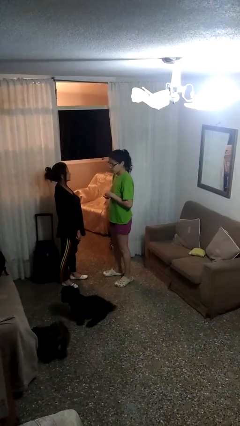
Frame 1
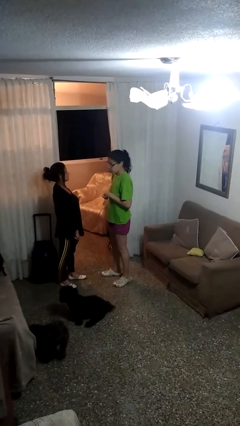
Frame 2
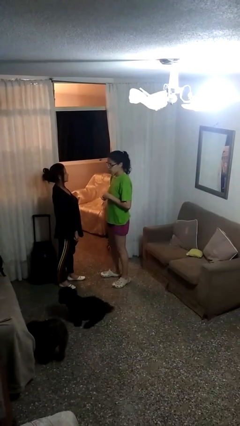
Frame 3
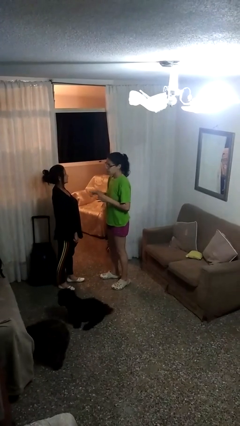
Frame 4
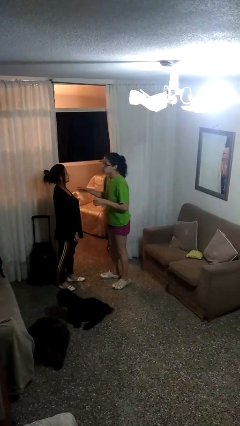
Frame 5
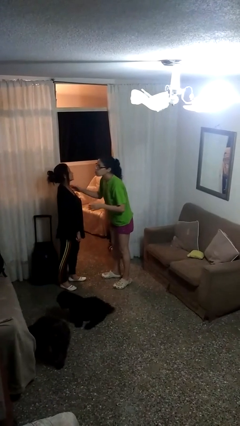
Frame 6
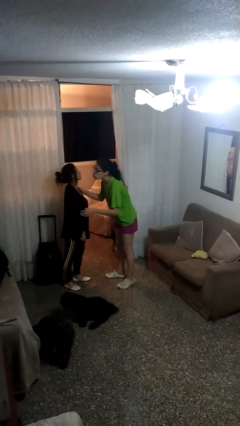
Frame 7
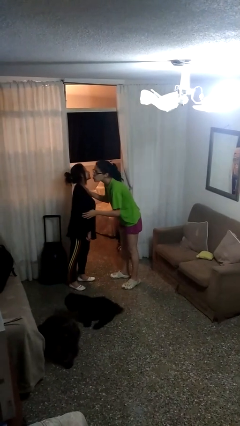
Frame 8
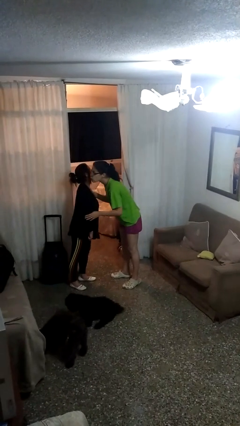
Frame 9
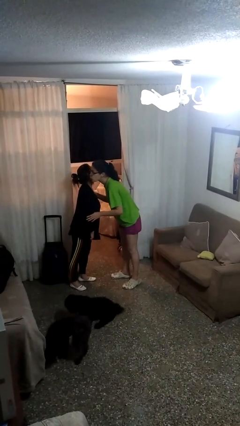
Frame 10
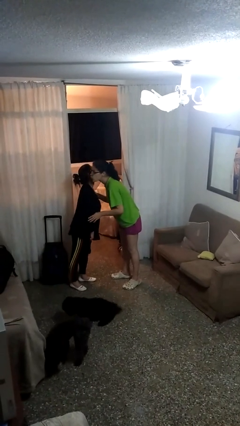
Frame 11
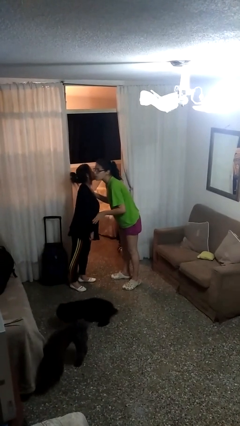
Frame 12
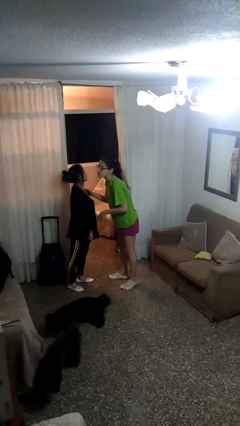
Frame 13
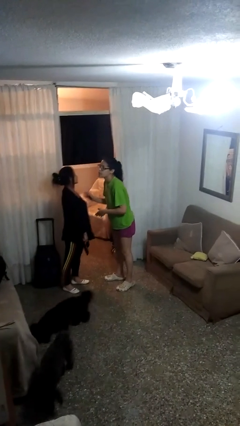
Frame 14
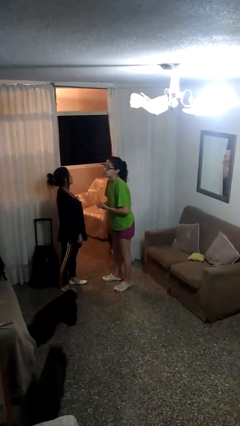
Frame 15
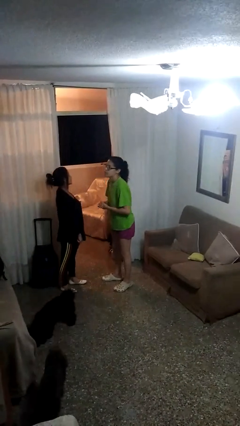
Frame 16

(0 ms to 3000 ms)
person kisses cheek of person

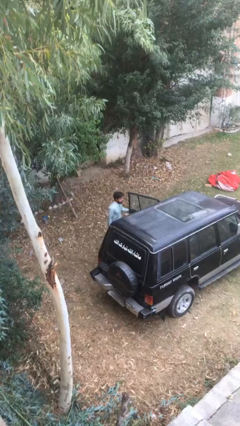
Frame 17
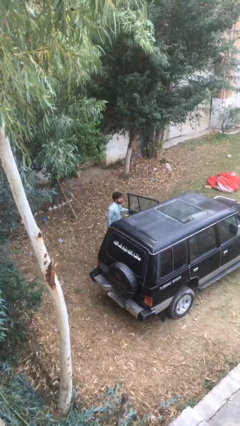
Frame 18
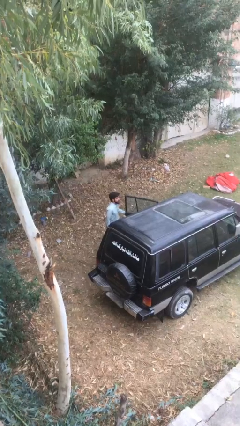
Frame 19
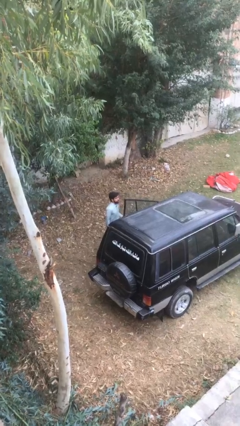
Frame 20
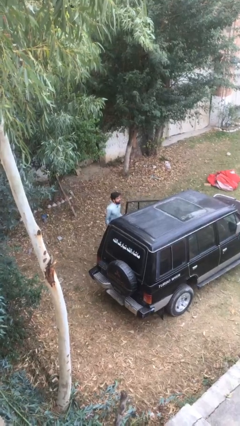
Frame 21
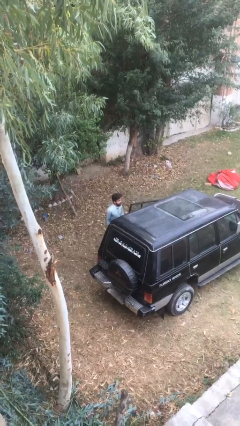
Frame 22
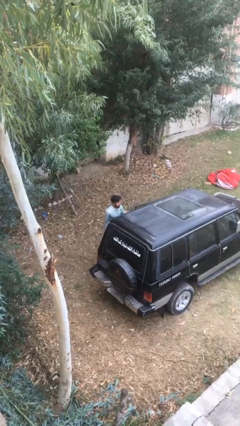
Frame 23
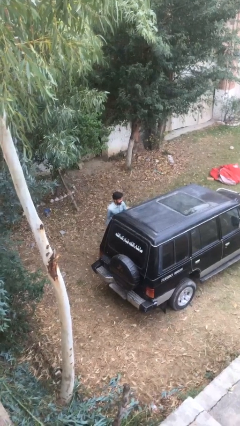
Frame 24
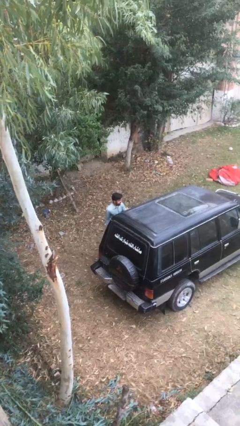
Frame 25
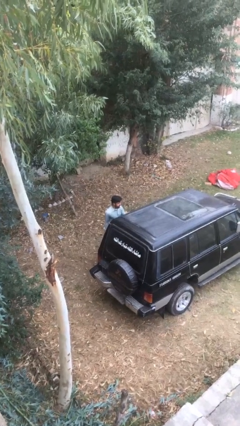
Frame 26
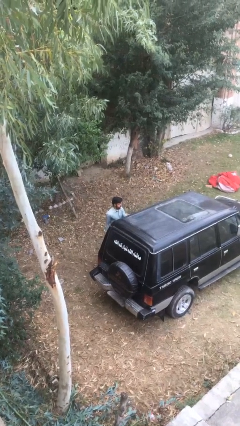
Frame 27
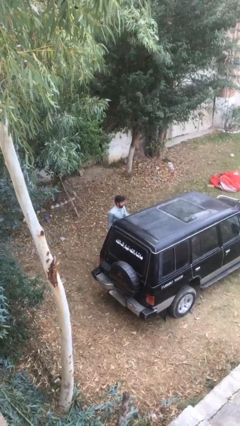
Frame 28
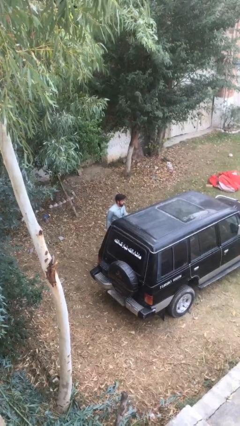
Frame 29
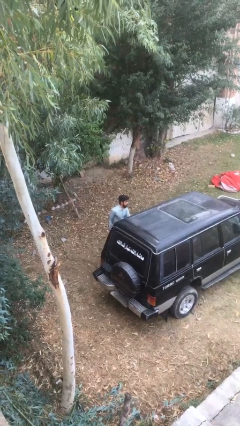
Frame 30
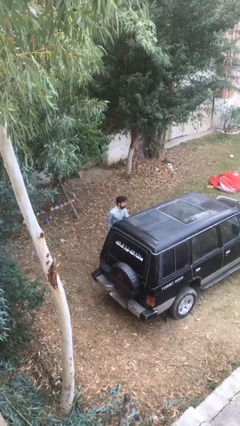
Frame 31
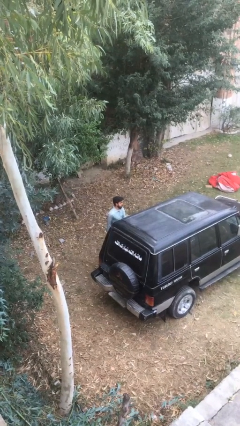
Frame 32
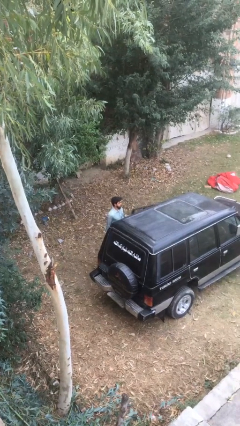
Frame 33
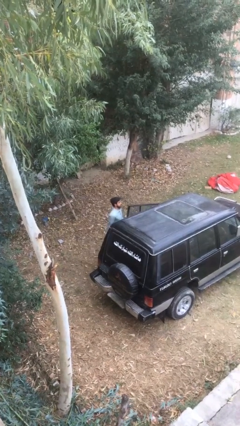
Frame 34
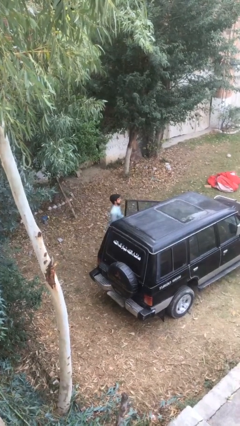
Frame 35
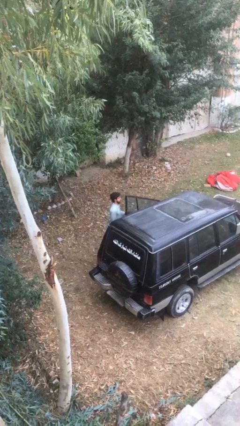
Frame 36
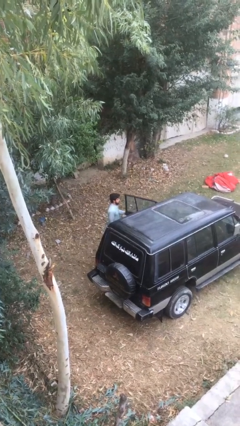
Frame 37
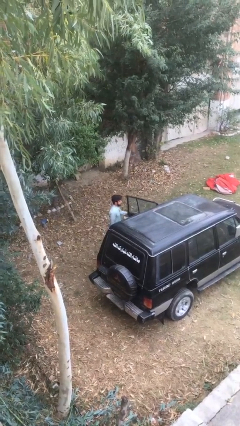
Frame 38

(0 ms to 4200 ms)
person closes car door

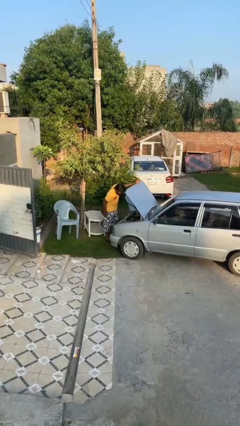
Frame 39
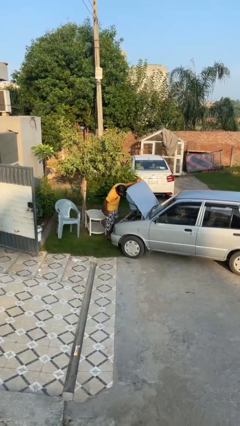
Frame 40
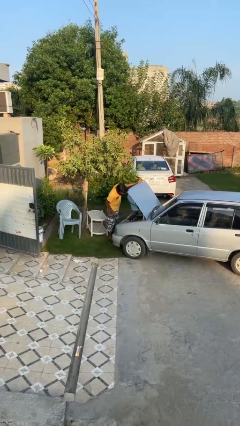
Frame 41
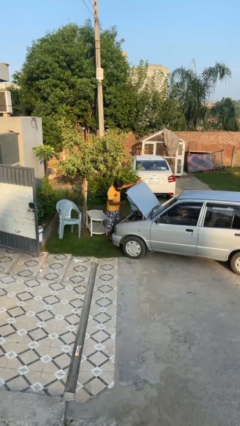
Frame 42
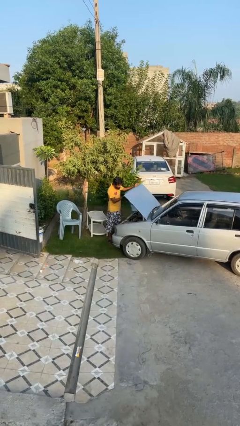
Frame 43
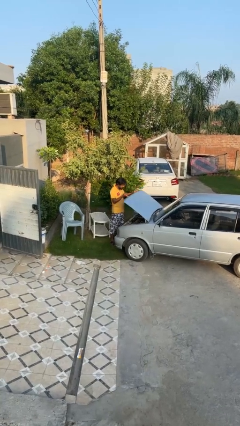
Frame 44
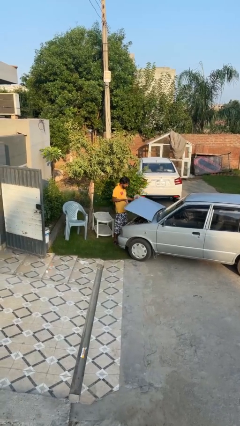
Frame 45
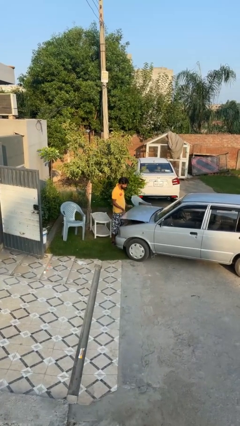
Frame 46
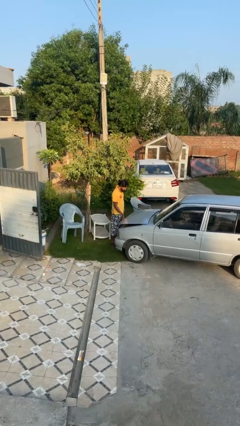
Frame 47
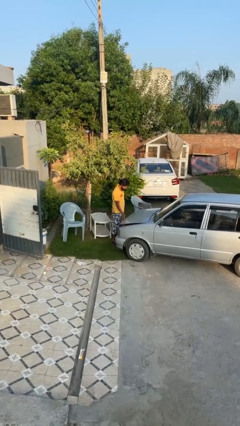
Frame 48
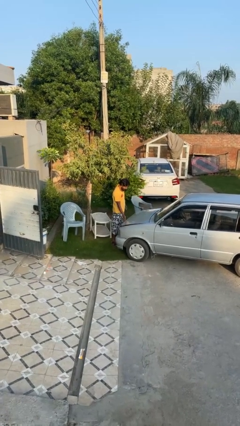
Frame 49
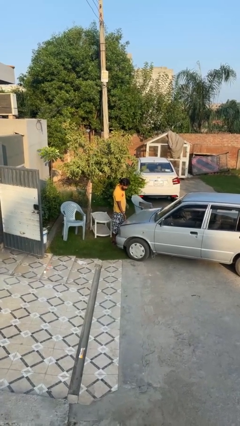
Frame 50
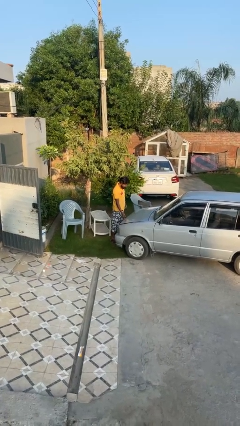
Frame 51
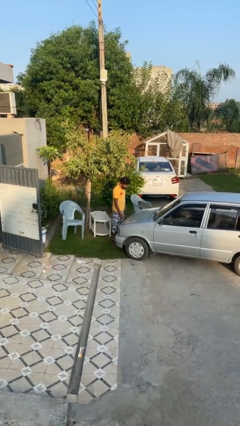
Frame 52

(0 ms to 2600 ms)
person closes car hood

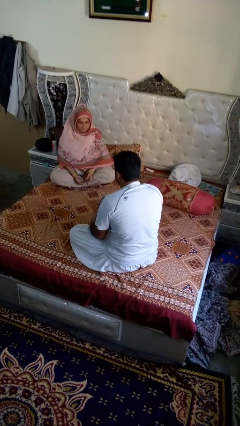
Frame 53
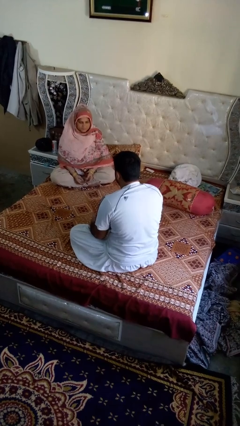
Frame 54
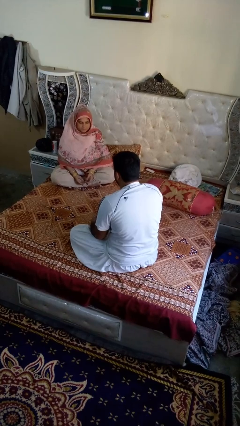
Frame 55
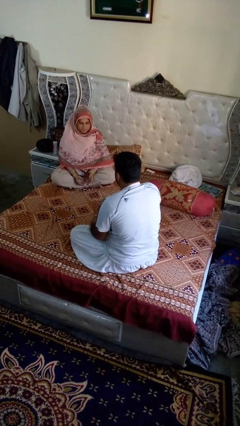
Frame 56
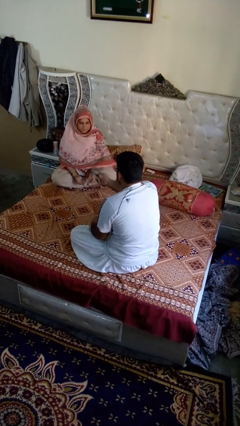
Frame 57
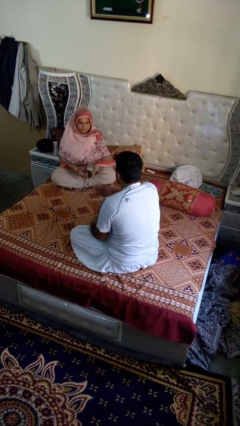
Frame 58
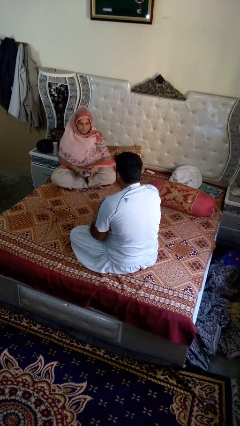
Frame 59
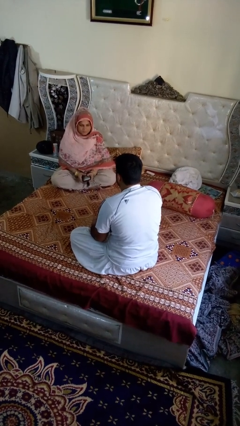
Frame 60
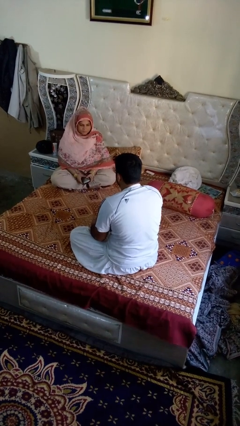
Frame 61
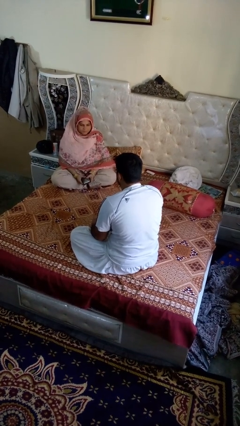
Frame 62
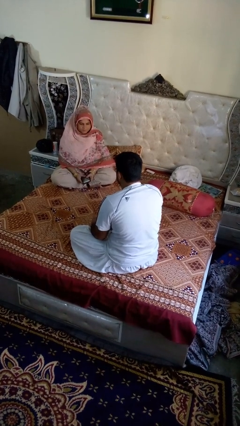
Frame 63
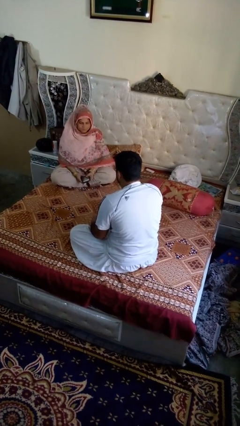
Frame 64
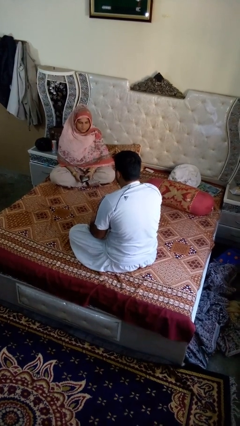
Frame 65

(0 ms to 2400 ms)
person throws object to person

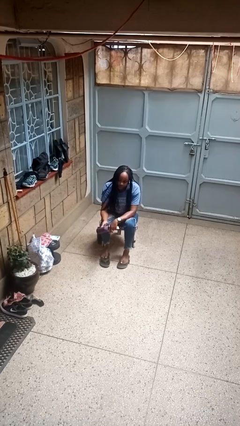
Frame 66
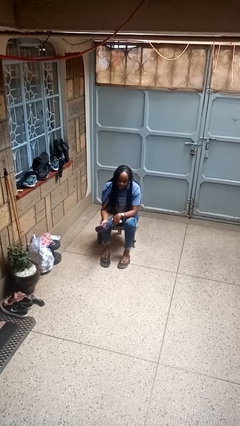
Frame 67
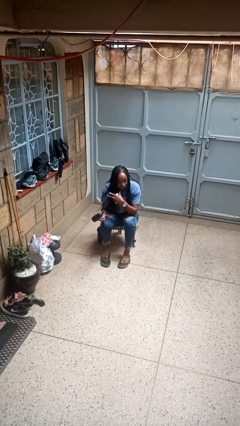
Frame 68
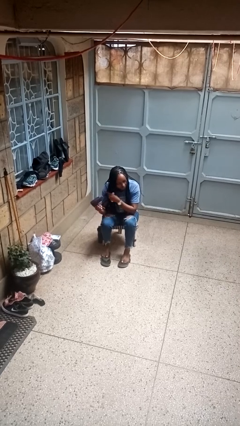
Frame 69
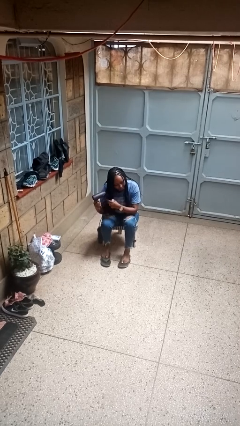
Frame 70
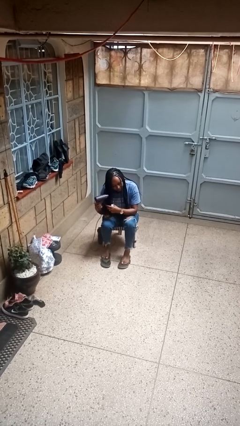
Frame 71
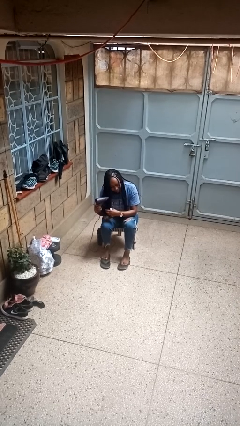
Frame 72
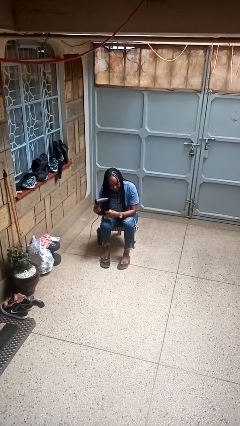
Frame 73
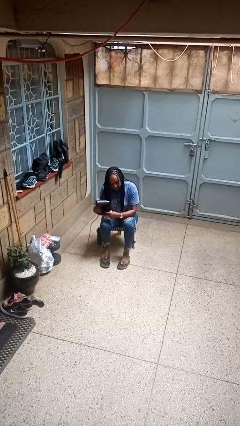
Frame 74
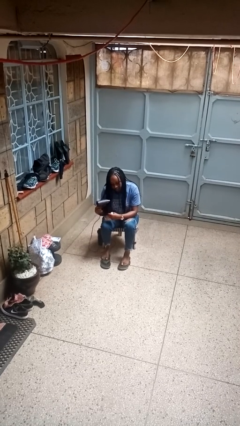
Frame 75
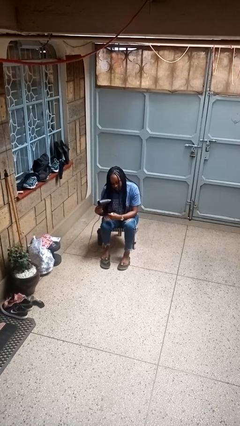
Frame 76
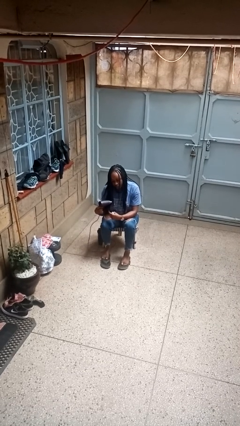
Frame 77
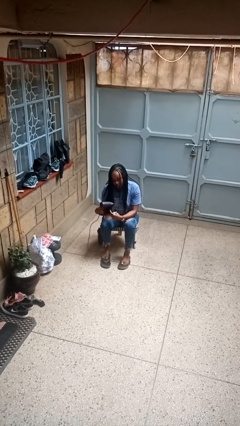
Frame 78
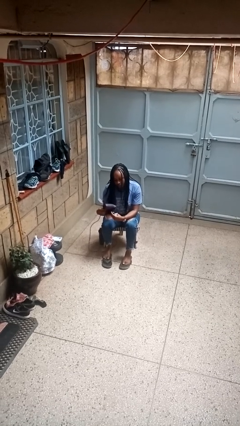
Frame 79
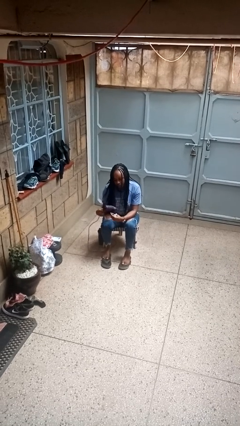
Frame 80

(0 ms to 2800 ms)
person dries hair with hairdryer

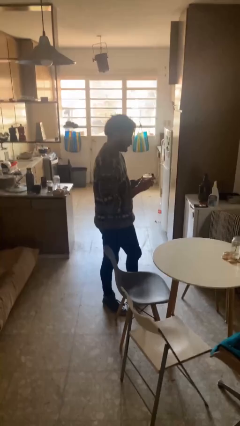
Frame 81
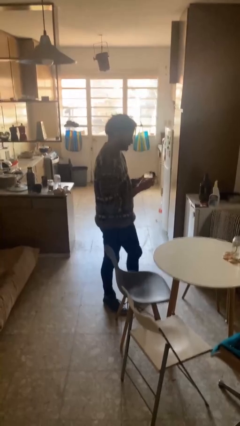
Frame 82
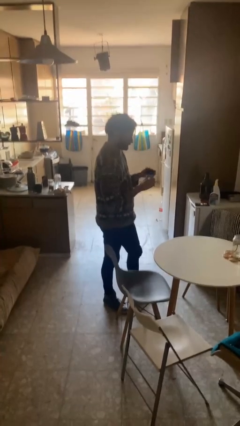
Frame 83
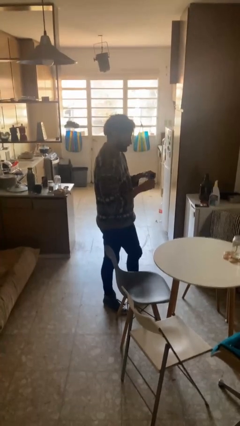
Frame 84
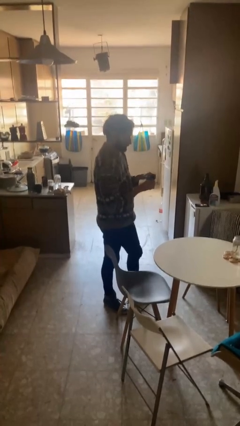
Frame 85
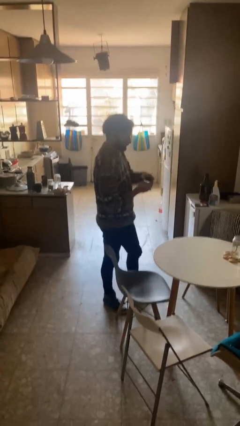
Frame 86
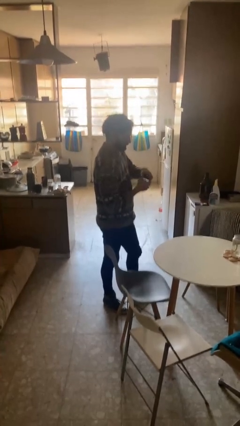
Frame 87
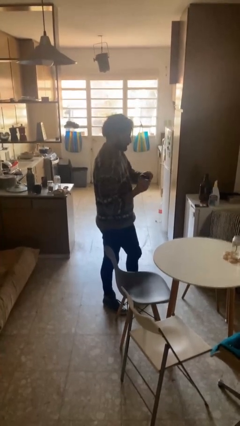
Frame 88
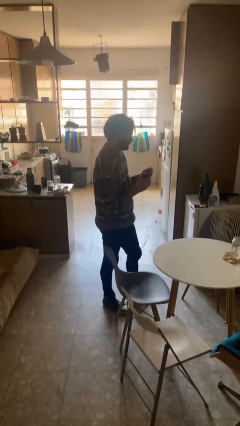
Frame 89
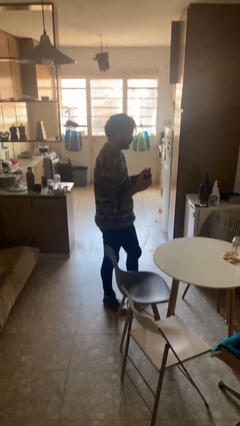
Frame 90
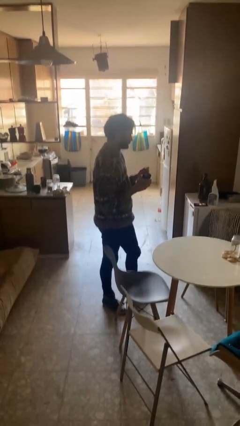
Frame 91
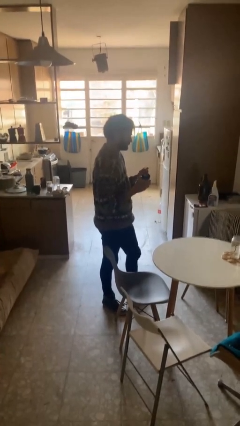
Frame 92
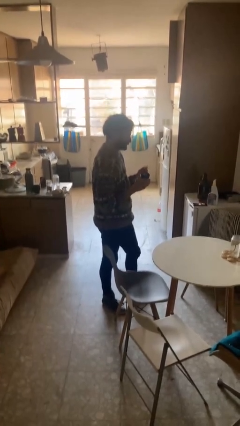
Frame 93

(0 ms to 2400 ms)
person closes jar

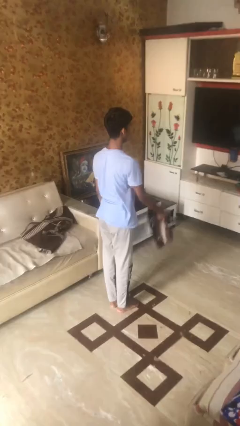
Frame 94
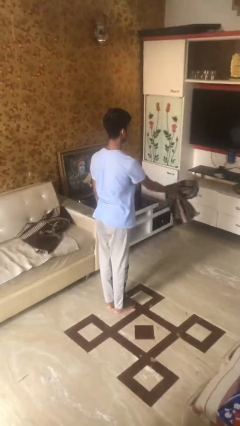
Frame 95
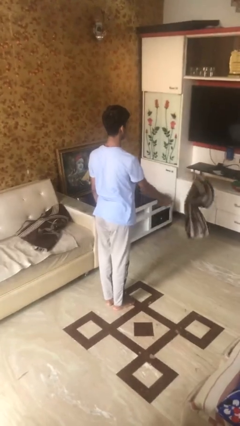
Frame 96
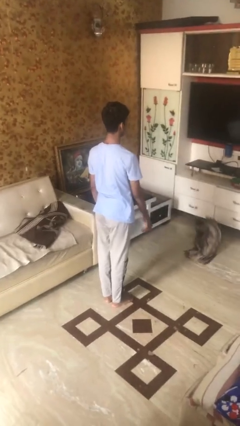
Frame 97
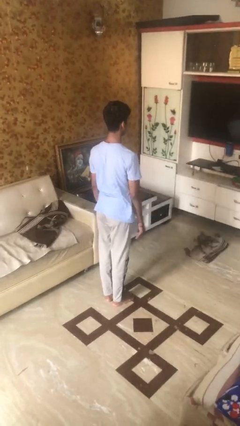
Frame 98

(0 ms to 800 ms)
person throws object to ground
